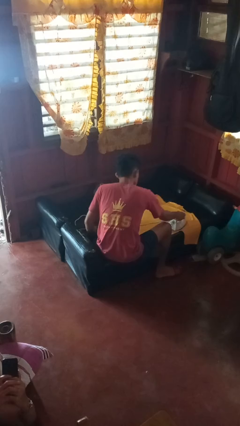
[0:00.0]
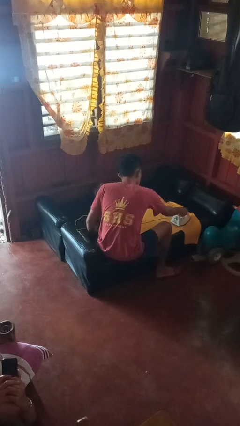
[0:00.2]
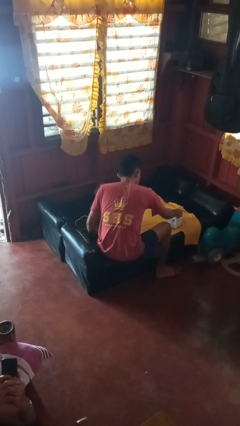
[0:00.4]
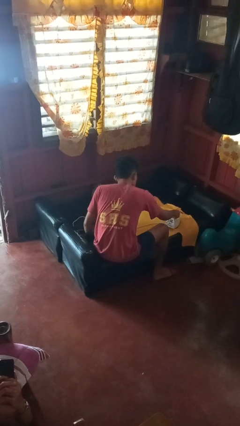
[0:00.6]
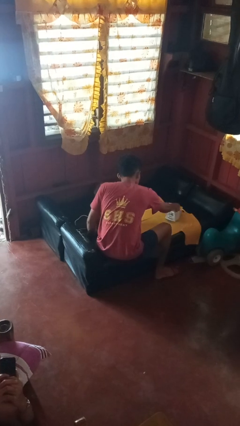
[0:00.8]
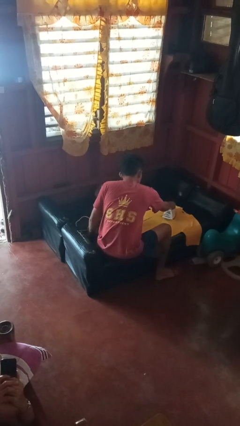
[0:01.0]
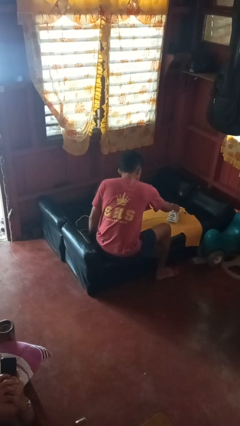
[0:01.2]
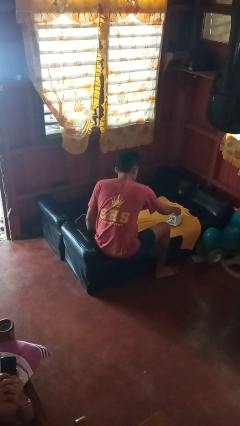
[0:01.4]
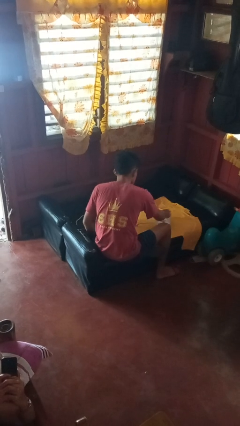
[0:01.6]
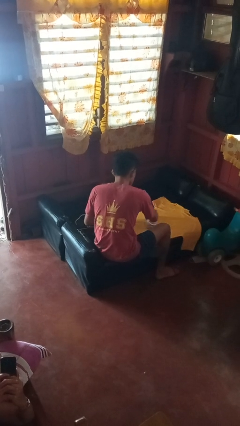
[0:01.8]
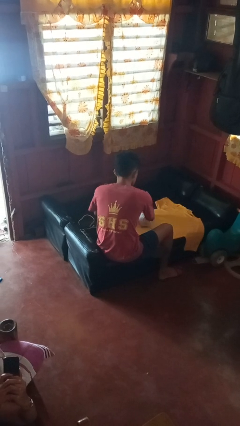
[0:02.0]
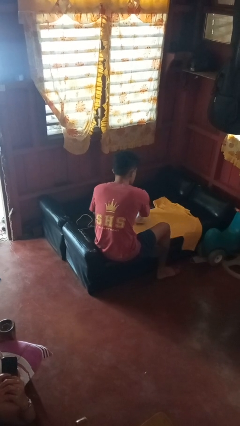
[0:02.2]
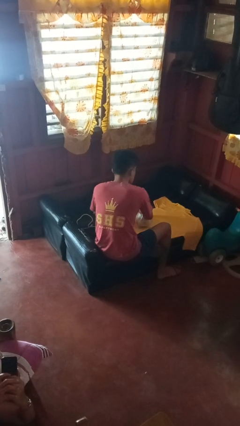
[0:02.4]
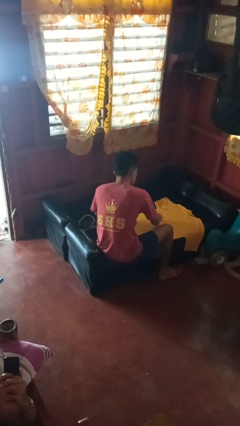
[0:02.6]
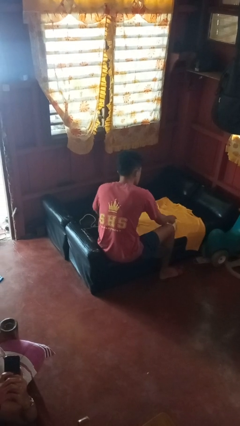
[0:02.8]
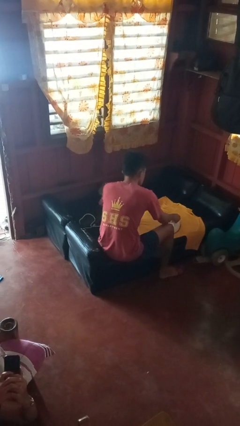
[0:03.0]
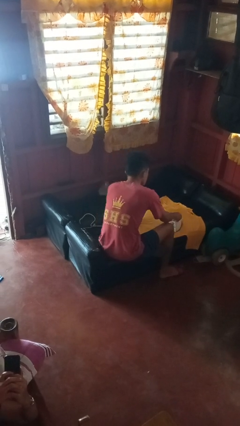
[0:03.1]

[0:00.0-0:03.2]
person irons clothes

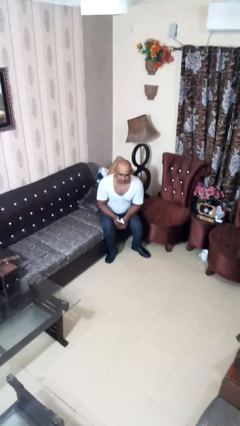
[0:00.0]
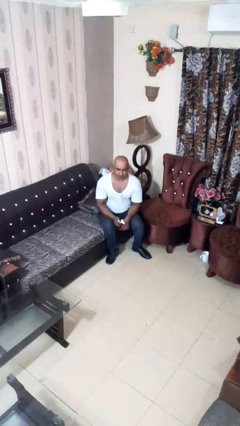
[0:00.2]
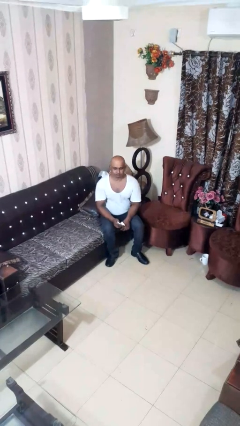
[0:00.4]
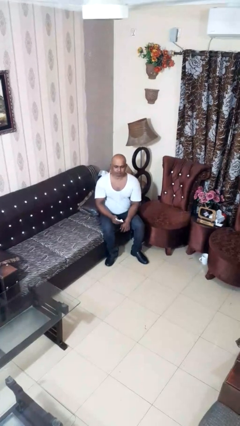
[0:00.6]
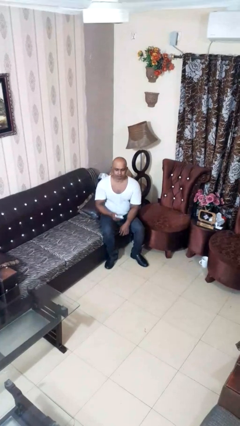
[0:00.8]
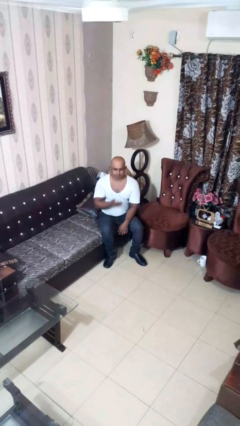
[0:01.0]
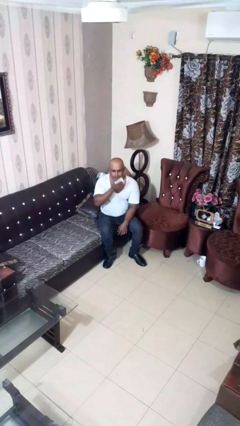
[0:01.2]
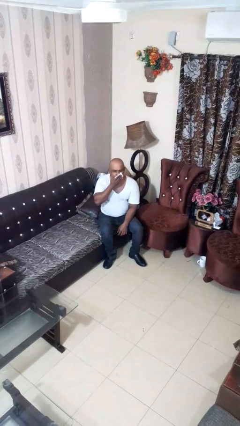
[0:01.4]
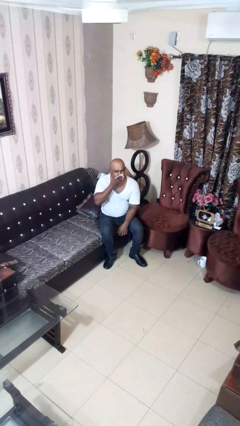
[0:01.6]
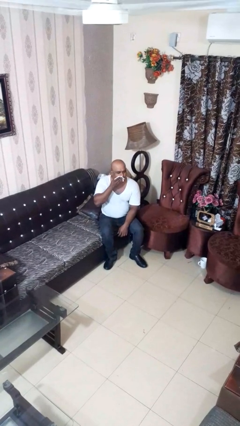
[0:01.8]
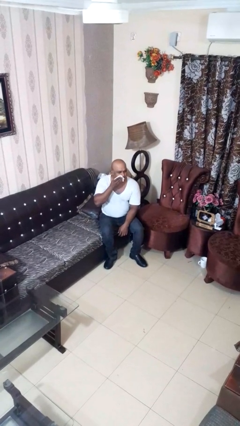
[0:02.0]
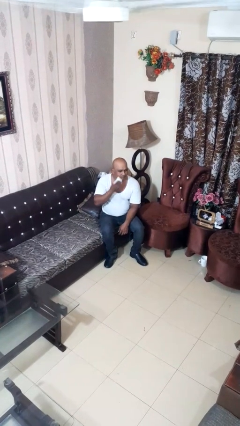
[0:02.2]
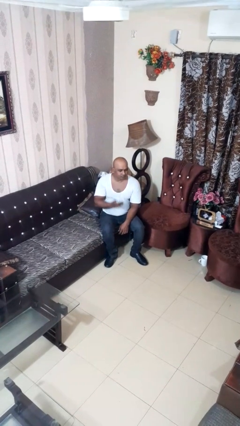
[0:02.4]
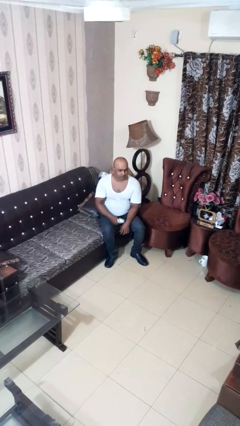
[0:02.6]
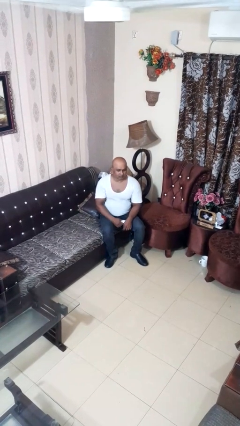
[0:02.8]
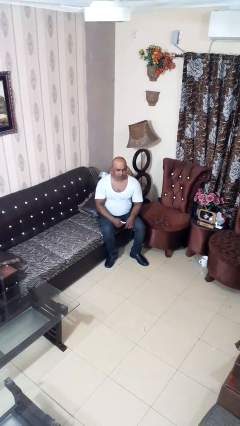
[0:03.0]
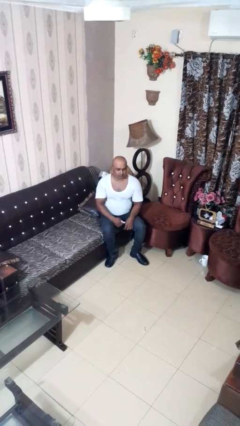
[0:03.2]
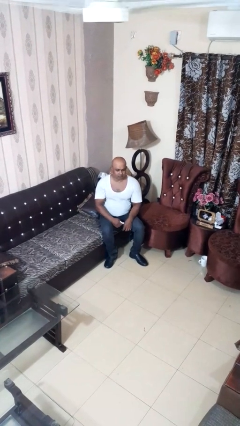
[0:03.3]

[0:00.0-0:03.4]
person wipes mouth with napkin

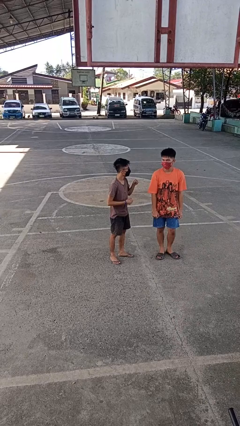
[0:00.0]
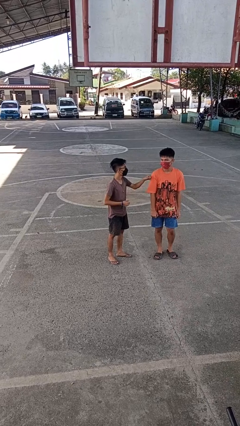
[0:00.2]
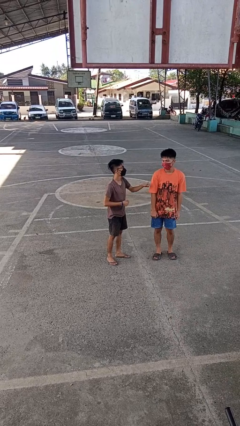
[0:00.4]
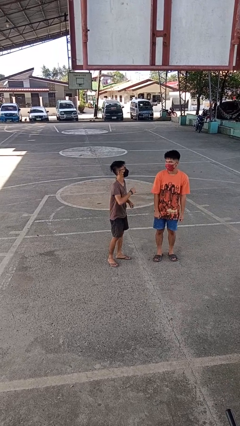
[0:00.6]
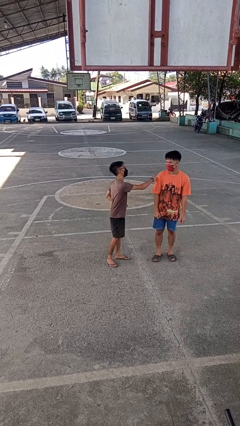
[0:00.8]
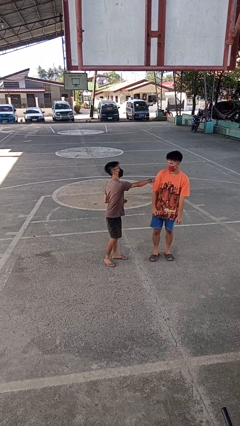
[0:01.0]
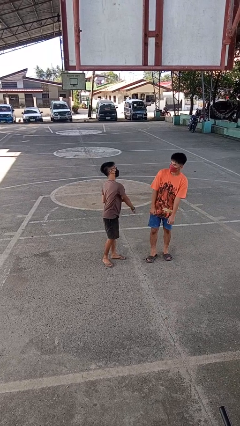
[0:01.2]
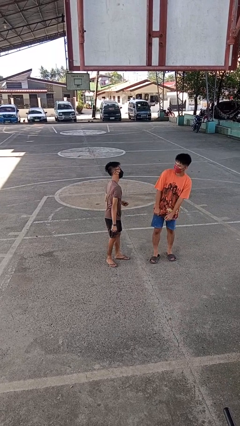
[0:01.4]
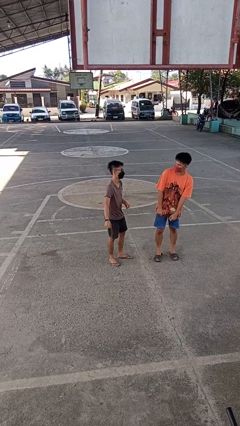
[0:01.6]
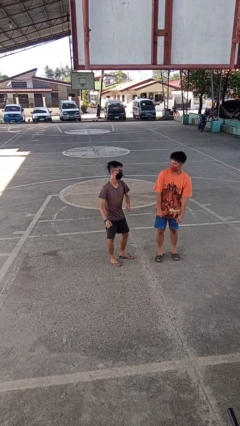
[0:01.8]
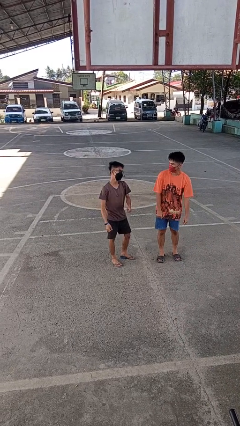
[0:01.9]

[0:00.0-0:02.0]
person pounds shoulders of person

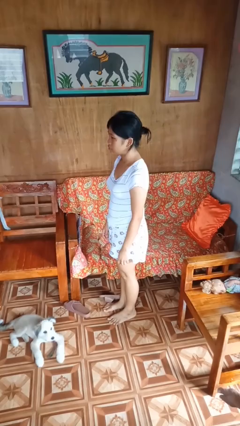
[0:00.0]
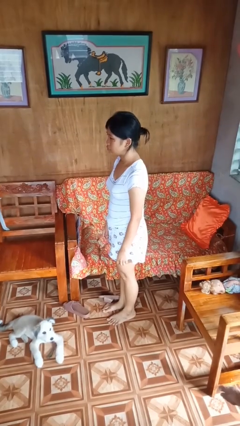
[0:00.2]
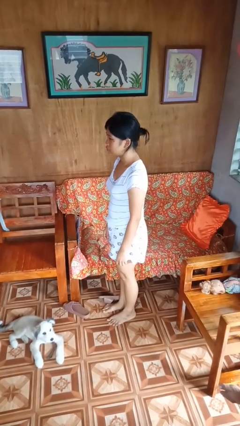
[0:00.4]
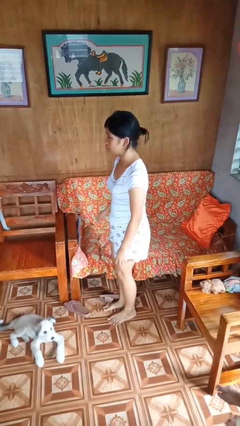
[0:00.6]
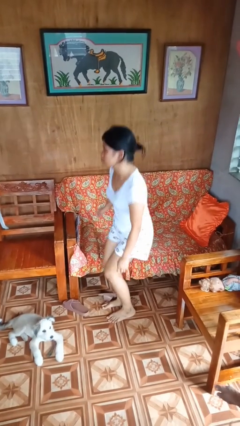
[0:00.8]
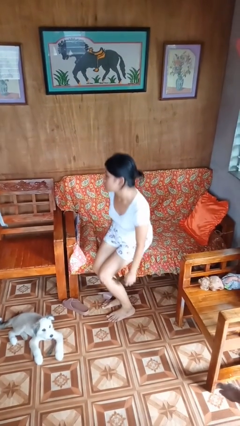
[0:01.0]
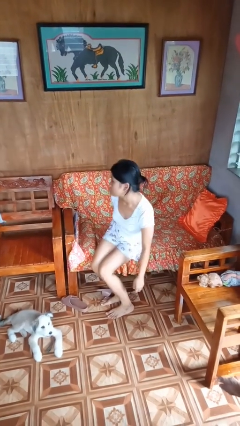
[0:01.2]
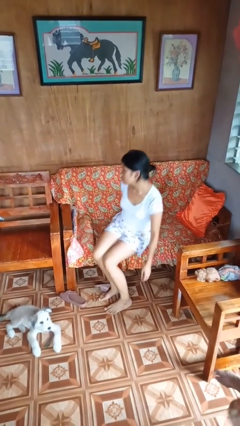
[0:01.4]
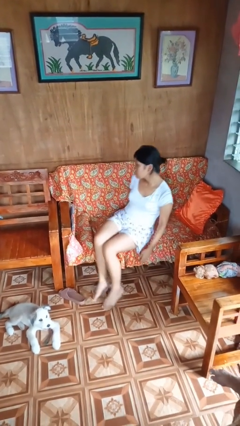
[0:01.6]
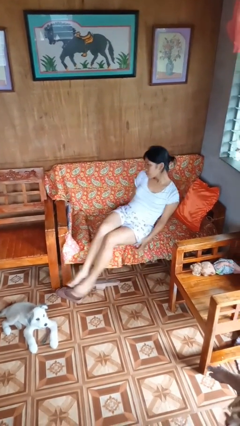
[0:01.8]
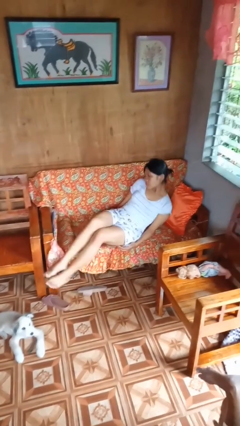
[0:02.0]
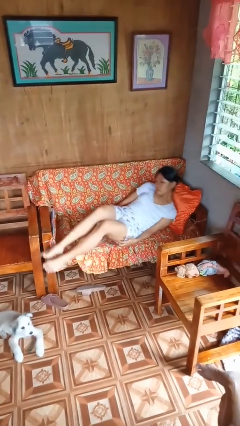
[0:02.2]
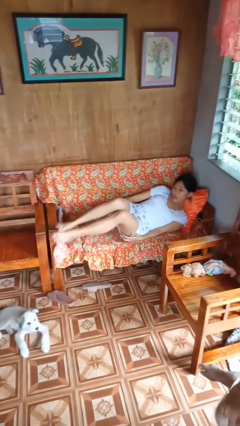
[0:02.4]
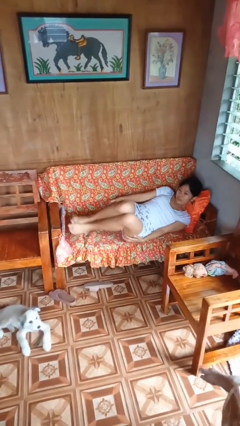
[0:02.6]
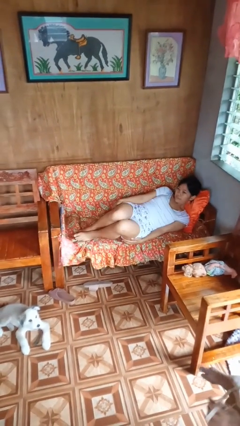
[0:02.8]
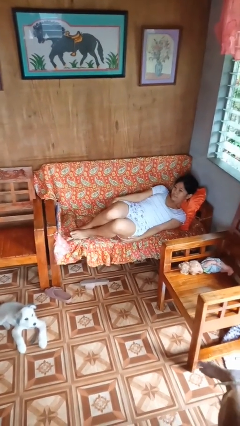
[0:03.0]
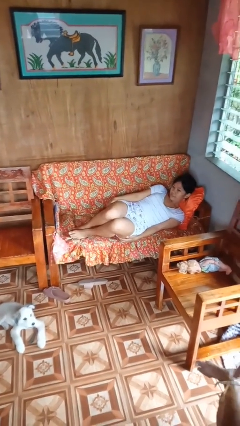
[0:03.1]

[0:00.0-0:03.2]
person lies down on couch

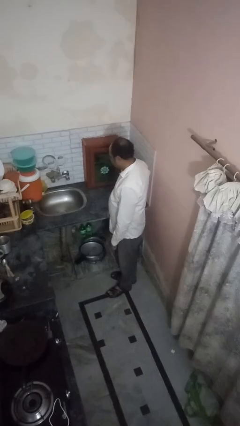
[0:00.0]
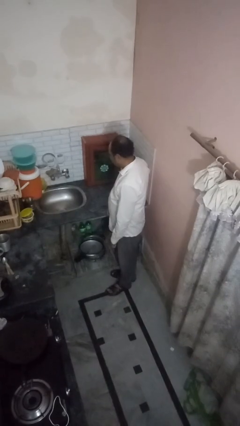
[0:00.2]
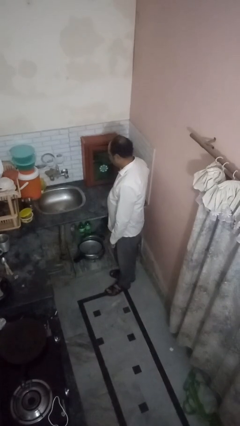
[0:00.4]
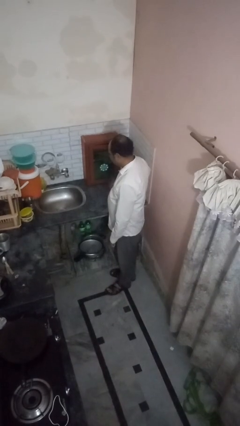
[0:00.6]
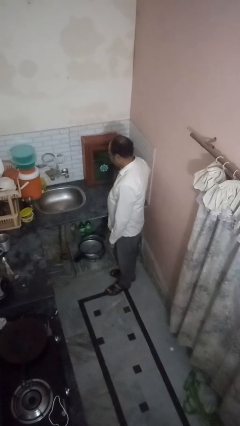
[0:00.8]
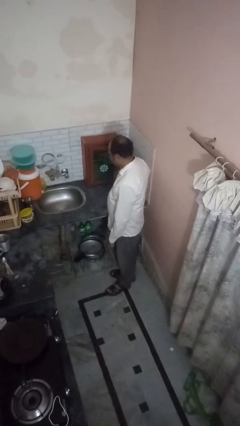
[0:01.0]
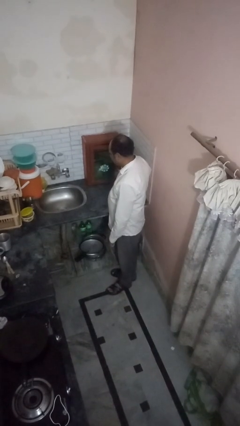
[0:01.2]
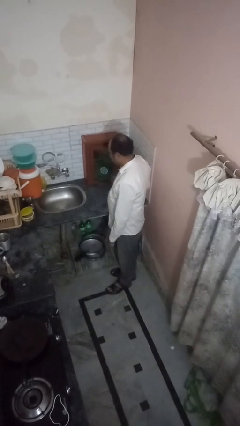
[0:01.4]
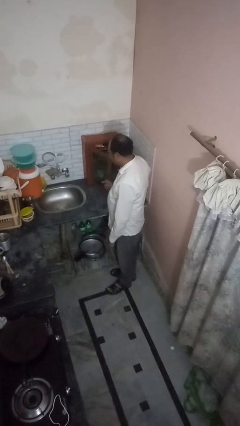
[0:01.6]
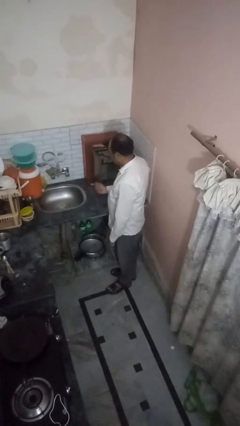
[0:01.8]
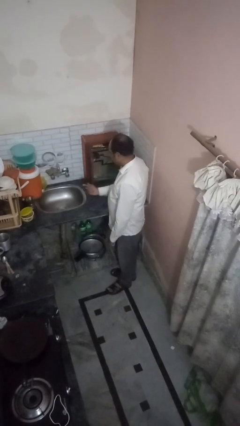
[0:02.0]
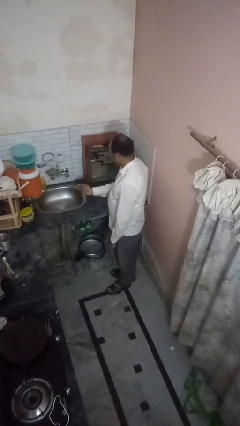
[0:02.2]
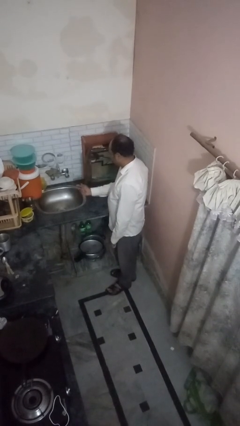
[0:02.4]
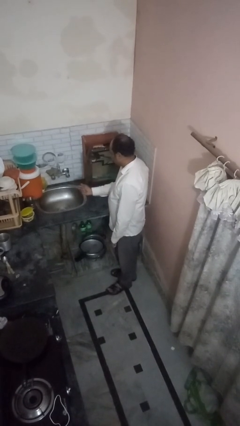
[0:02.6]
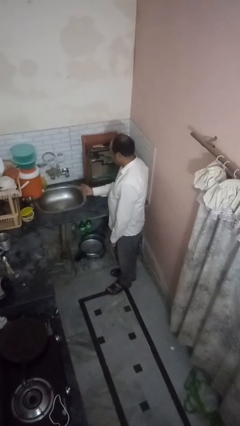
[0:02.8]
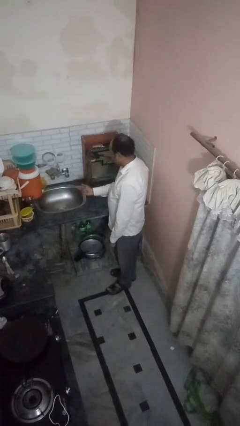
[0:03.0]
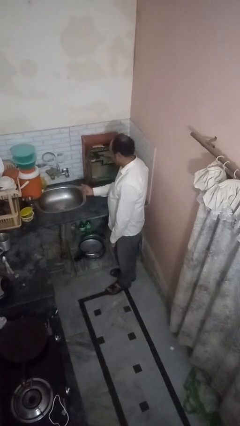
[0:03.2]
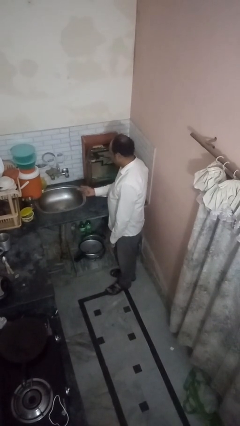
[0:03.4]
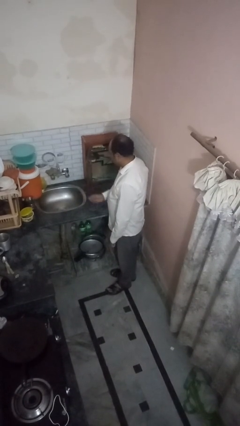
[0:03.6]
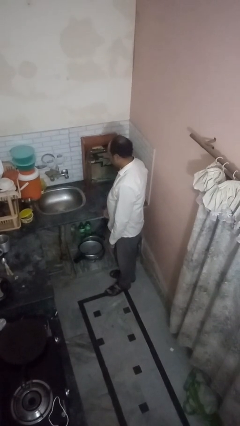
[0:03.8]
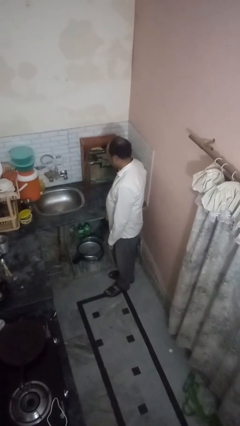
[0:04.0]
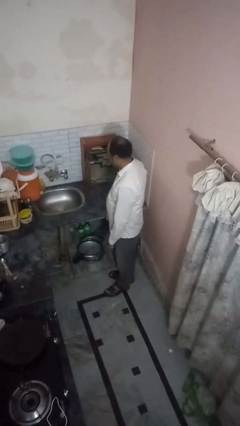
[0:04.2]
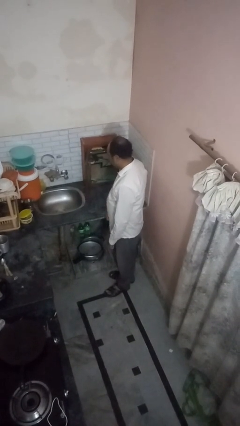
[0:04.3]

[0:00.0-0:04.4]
person opens kitchen drawer

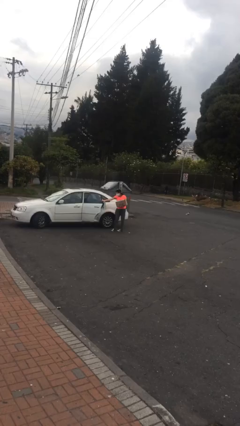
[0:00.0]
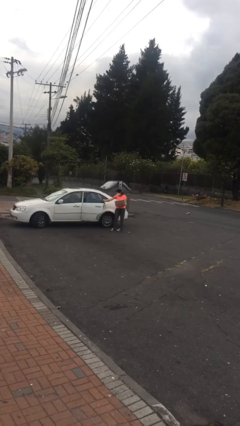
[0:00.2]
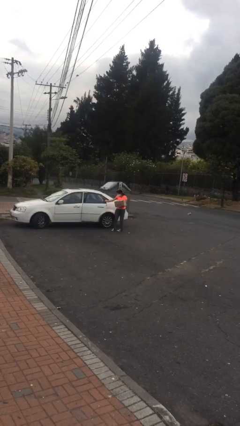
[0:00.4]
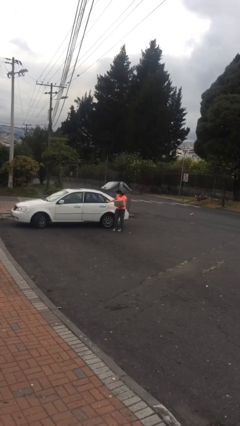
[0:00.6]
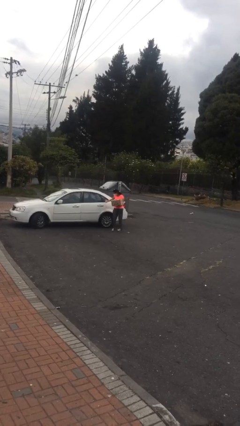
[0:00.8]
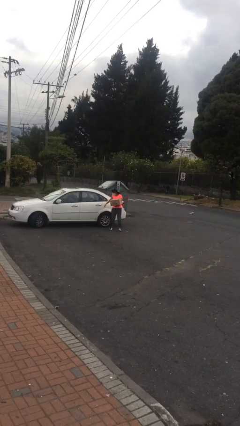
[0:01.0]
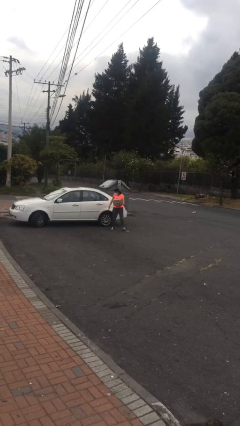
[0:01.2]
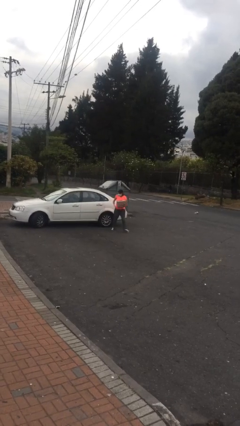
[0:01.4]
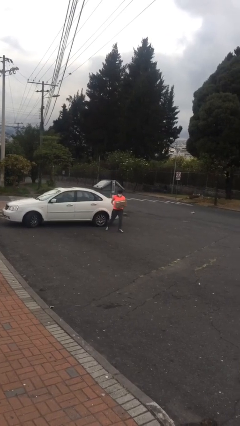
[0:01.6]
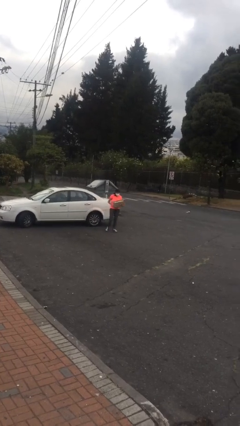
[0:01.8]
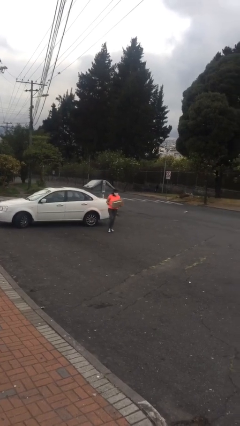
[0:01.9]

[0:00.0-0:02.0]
person closes car door
